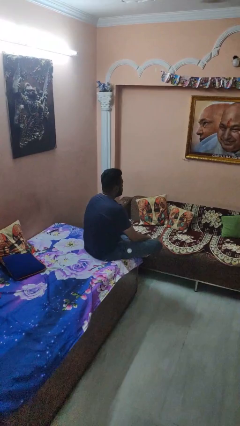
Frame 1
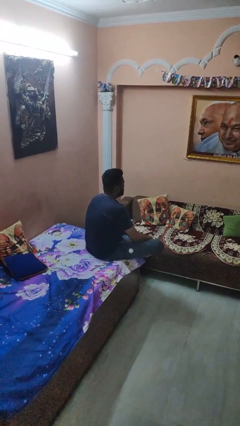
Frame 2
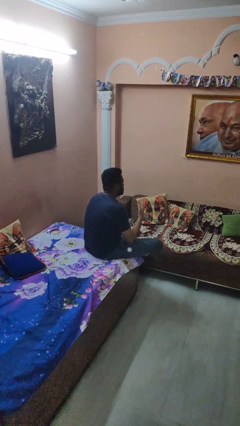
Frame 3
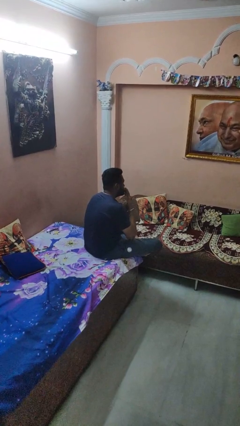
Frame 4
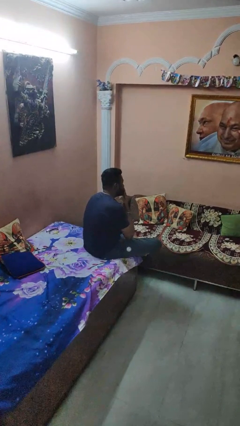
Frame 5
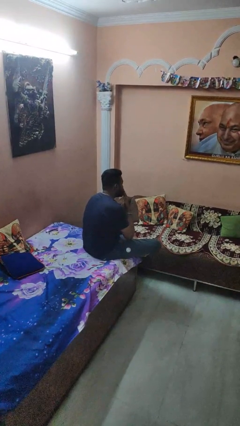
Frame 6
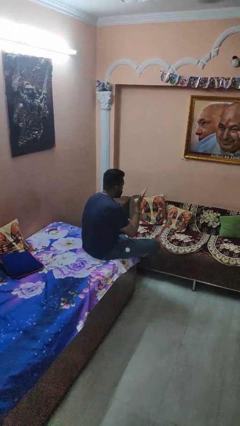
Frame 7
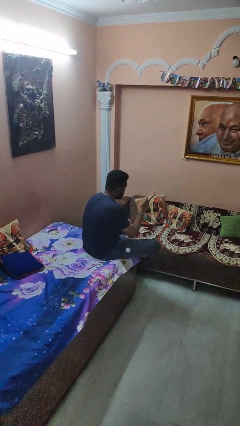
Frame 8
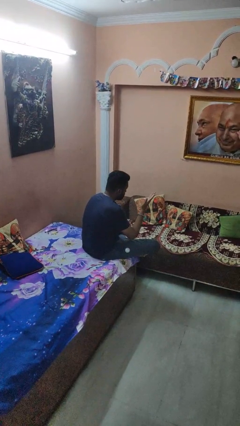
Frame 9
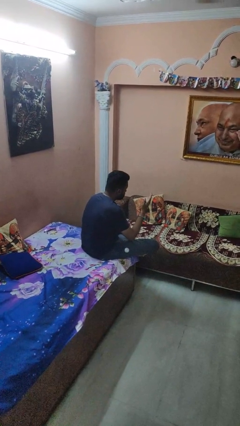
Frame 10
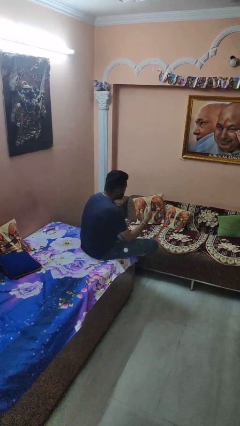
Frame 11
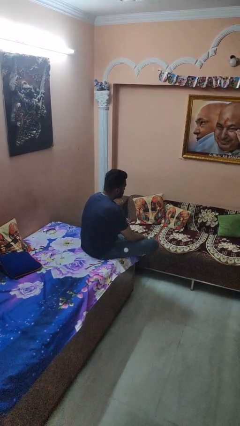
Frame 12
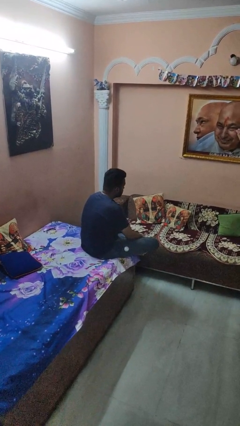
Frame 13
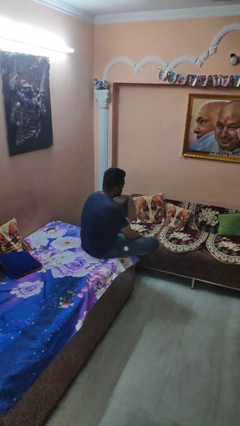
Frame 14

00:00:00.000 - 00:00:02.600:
person gestures blow kiss

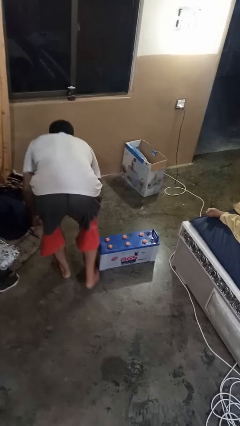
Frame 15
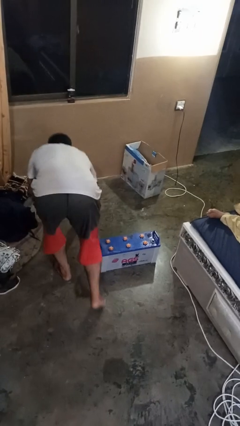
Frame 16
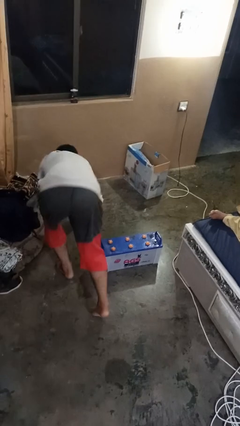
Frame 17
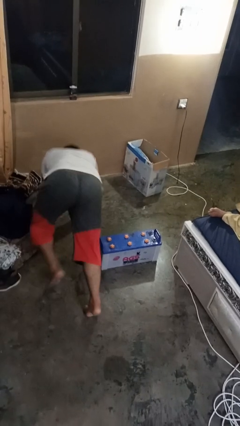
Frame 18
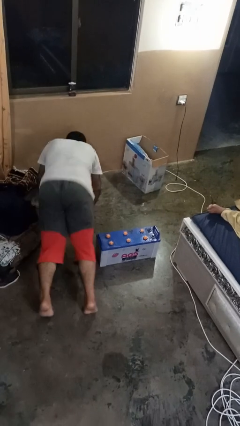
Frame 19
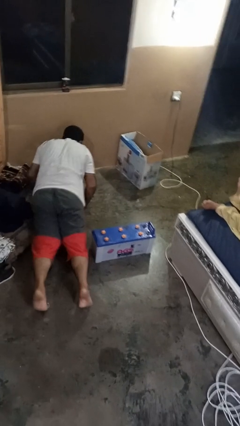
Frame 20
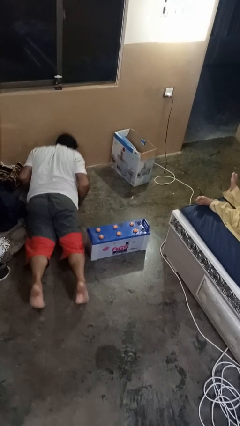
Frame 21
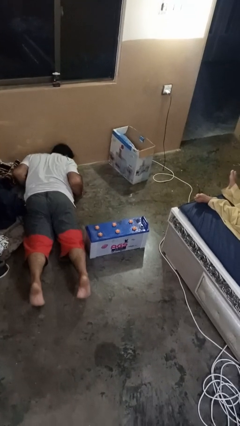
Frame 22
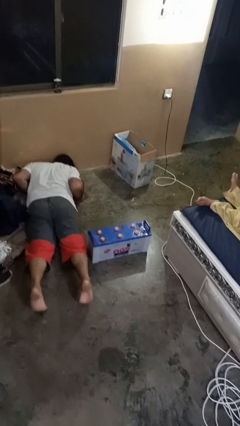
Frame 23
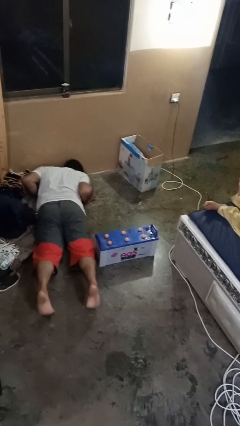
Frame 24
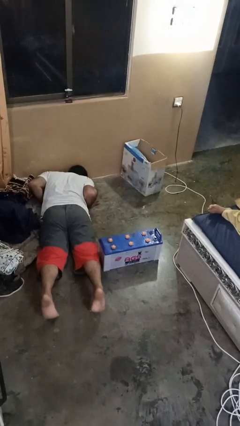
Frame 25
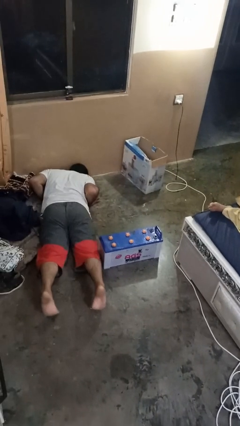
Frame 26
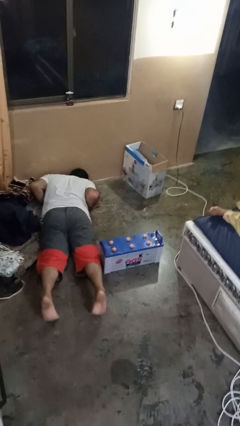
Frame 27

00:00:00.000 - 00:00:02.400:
person lies down on floor

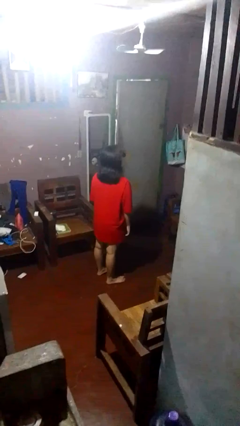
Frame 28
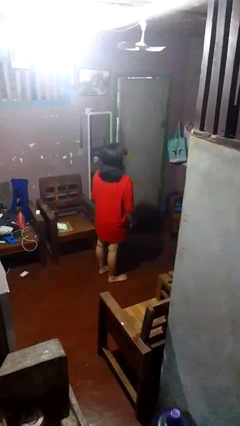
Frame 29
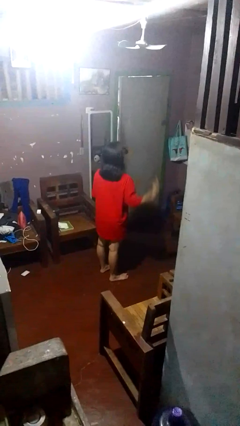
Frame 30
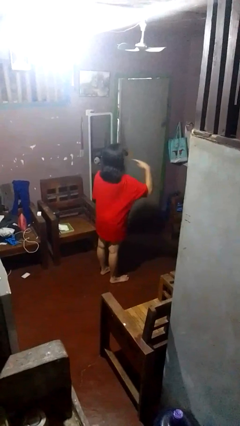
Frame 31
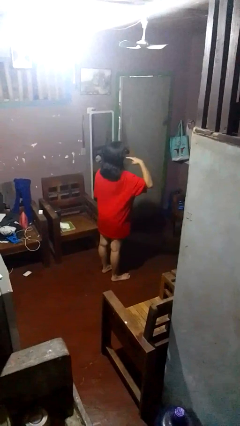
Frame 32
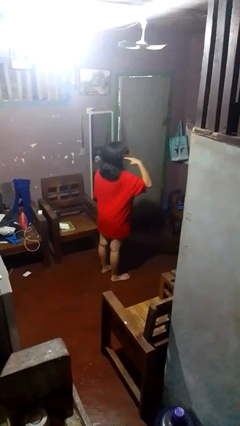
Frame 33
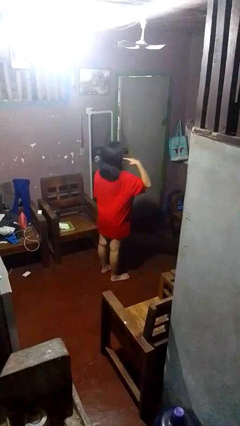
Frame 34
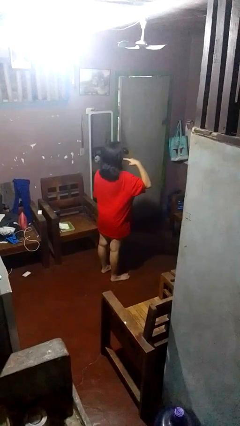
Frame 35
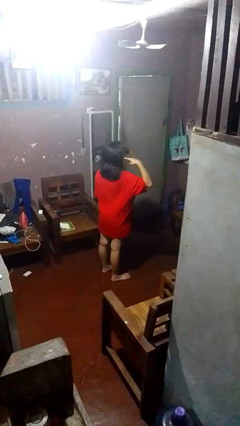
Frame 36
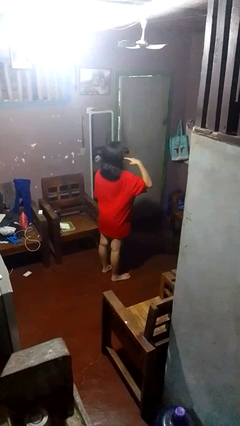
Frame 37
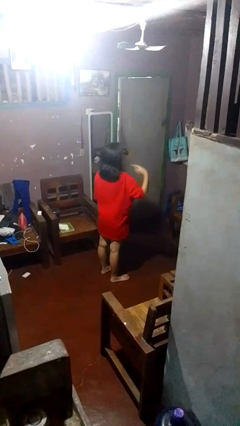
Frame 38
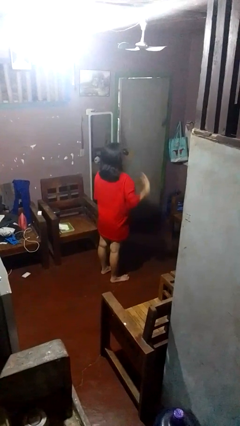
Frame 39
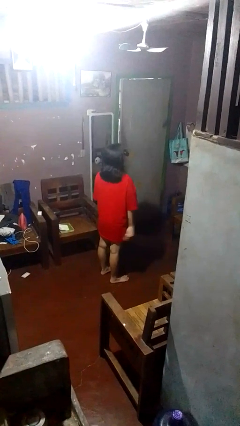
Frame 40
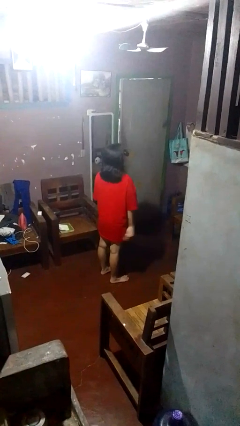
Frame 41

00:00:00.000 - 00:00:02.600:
person gestures listen closely

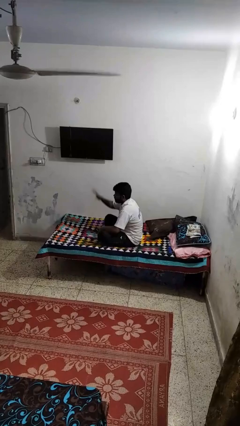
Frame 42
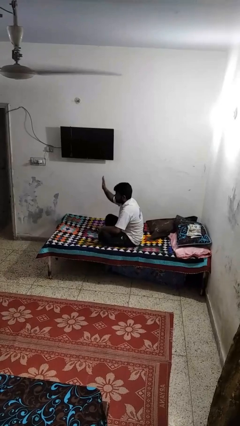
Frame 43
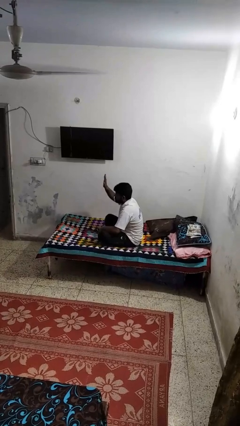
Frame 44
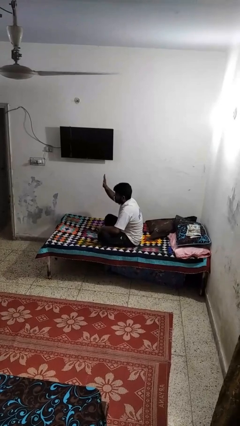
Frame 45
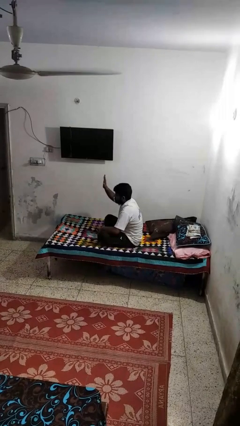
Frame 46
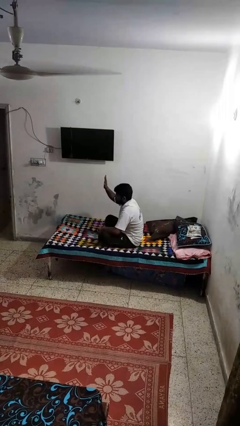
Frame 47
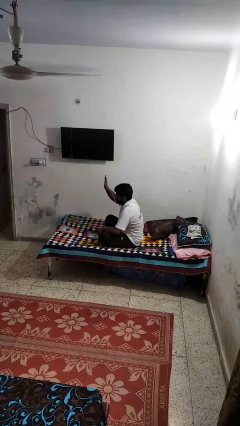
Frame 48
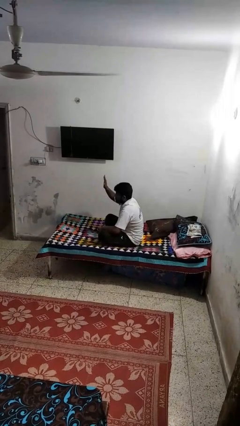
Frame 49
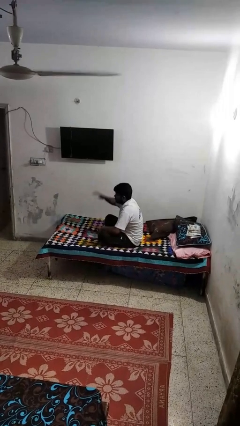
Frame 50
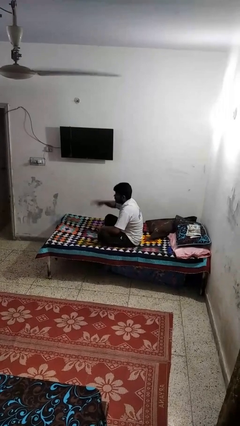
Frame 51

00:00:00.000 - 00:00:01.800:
person gestures raise hand

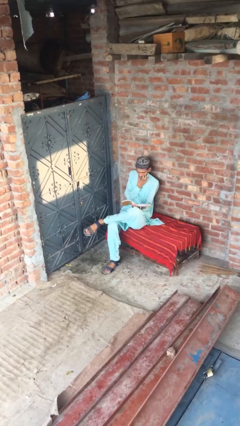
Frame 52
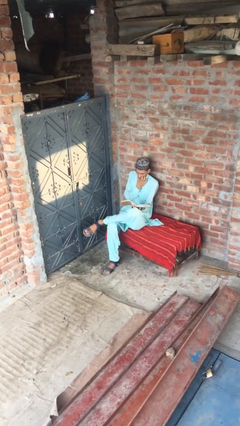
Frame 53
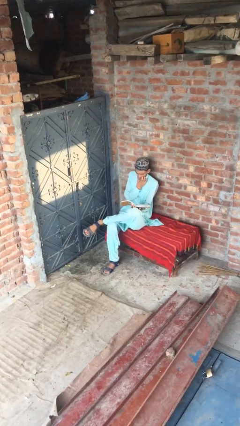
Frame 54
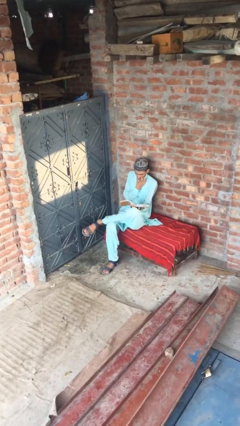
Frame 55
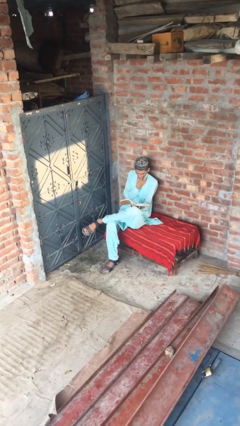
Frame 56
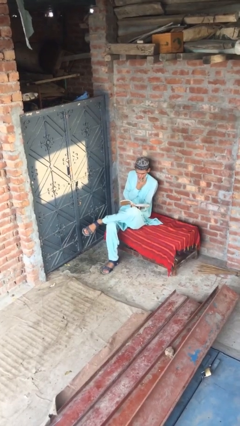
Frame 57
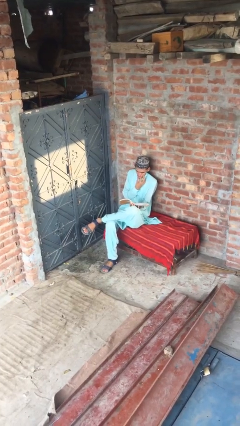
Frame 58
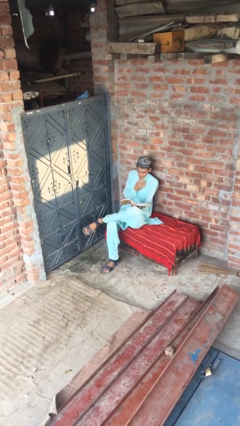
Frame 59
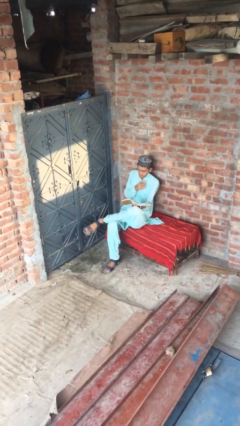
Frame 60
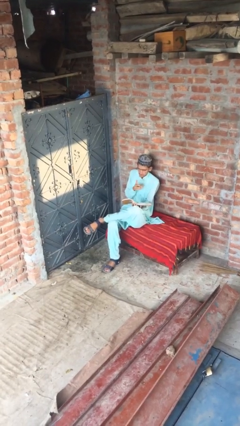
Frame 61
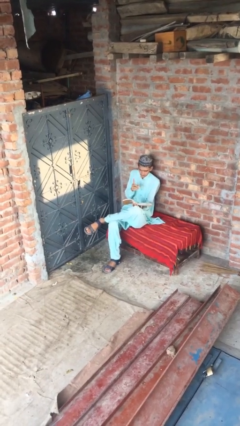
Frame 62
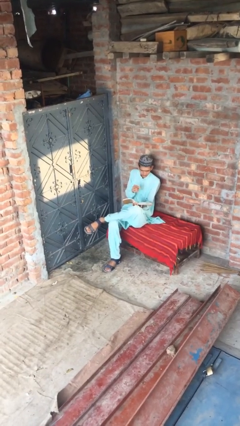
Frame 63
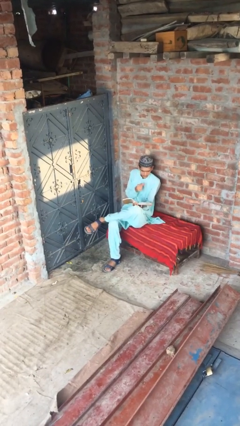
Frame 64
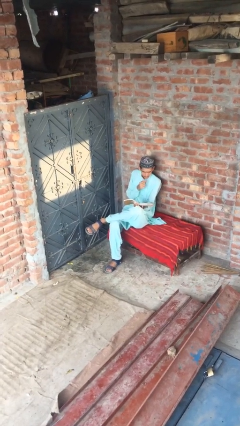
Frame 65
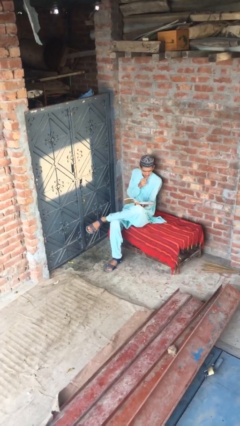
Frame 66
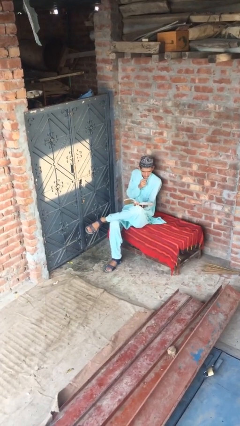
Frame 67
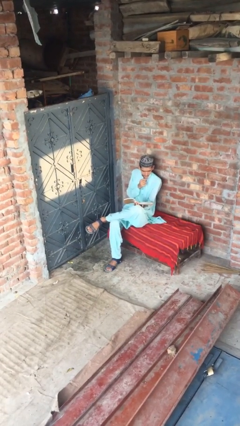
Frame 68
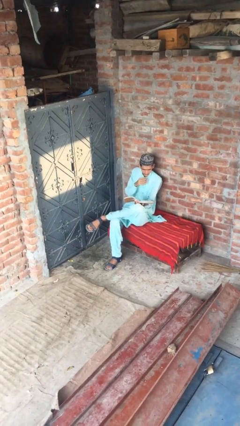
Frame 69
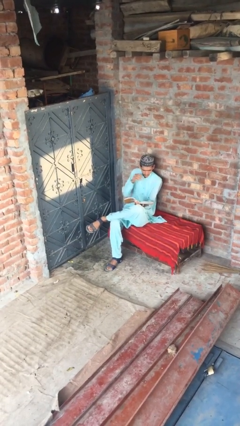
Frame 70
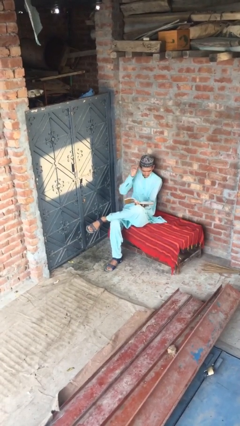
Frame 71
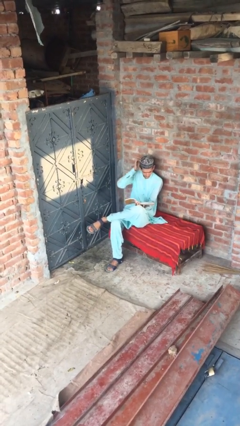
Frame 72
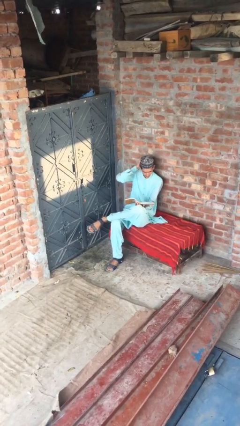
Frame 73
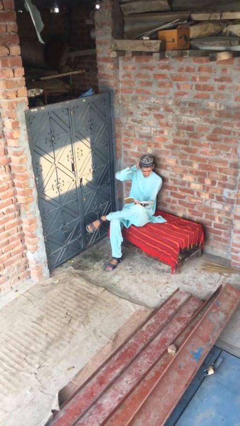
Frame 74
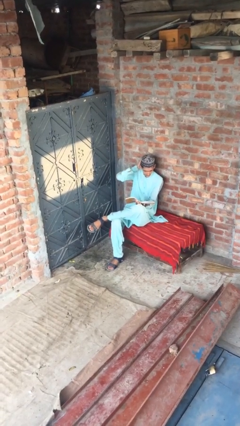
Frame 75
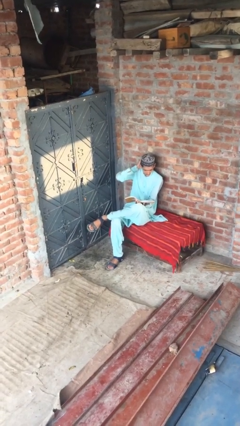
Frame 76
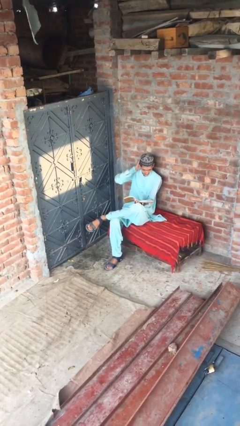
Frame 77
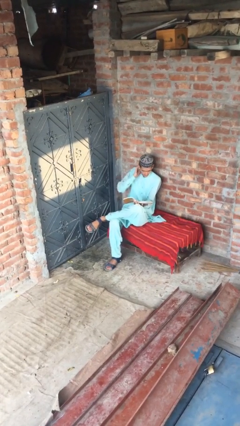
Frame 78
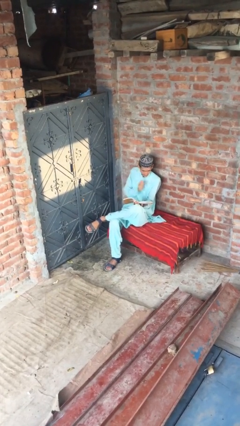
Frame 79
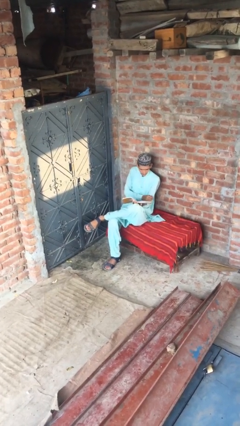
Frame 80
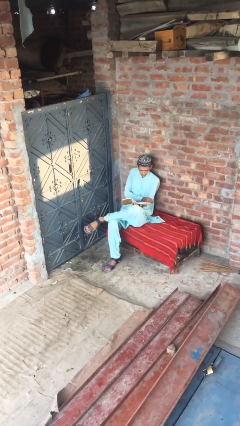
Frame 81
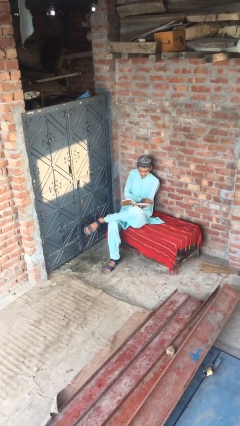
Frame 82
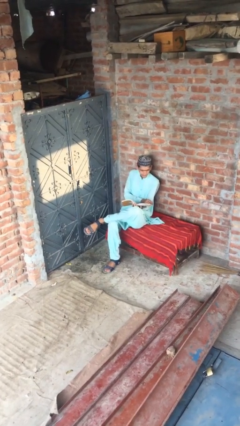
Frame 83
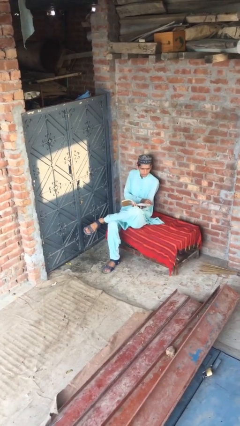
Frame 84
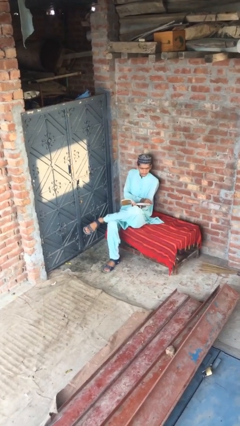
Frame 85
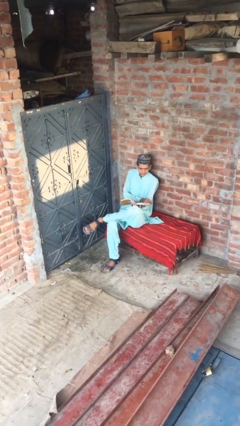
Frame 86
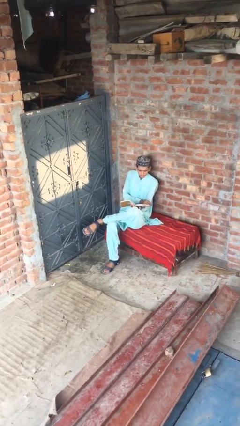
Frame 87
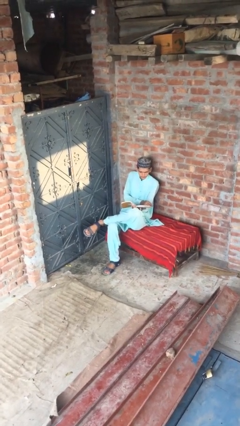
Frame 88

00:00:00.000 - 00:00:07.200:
person reads document

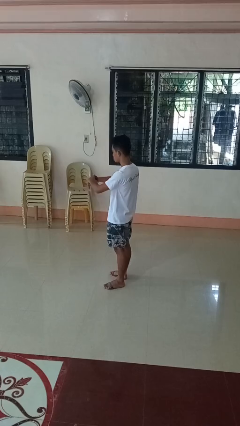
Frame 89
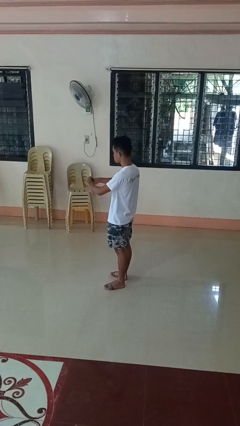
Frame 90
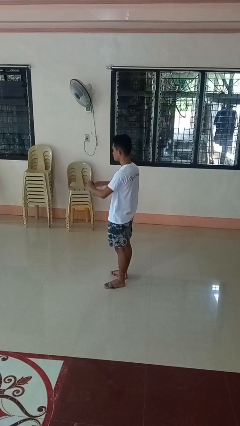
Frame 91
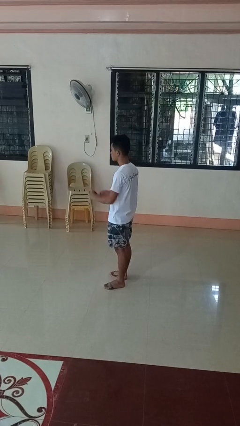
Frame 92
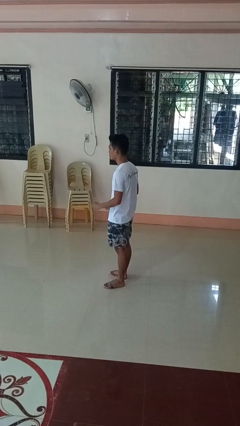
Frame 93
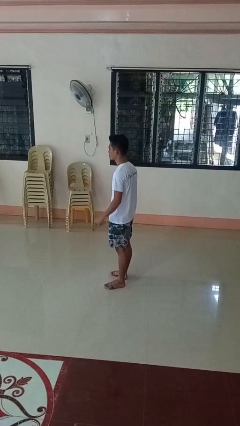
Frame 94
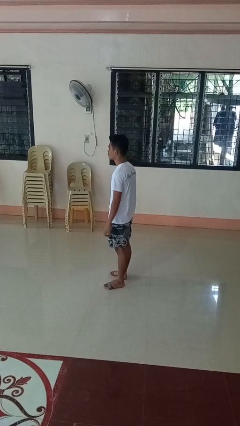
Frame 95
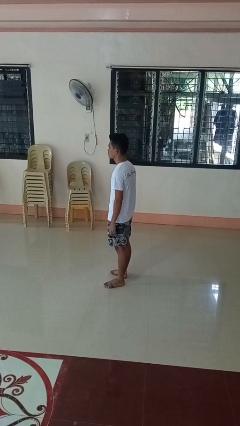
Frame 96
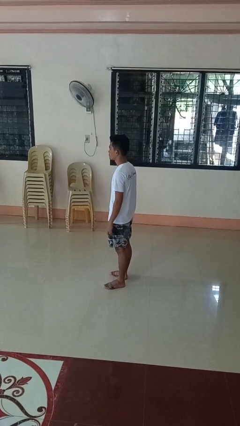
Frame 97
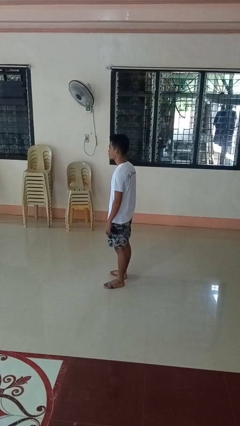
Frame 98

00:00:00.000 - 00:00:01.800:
person takes off wristwatch
